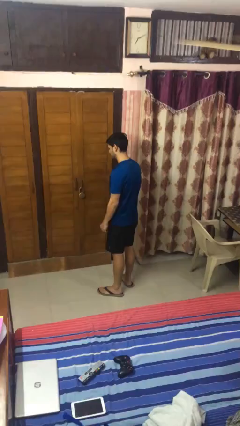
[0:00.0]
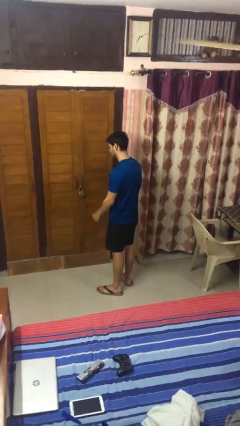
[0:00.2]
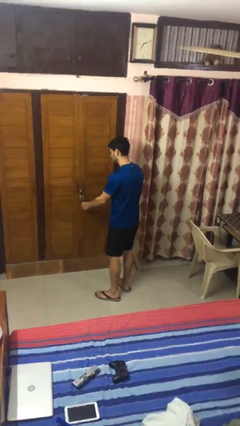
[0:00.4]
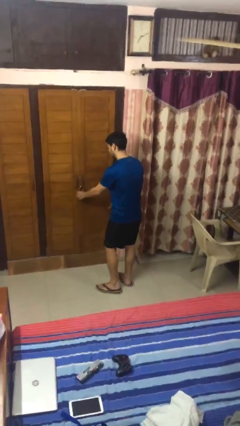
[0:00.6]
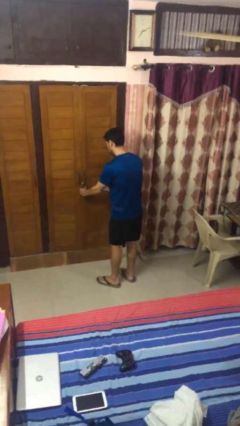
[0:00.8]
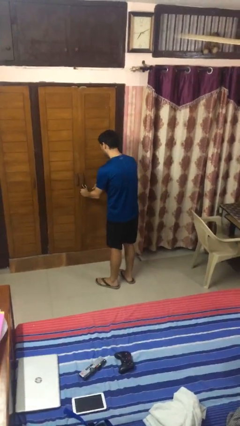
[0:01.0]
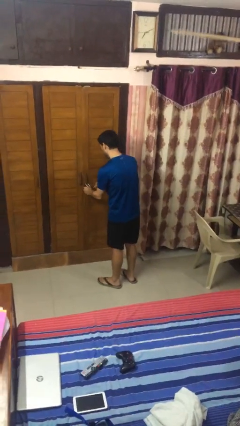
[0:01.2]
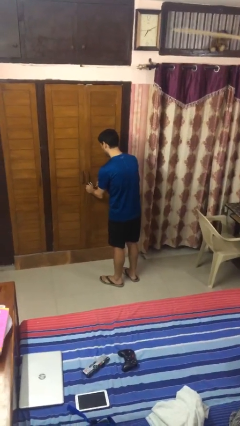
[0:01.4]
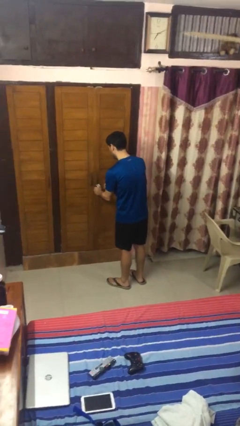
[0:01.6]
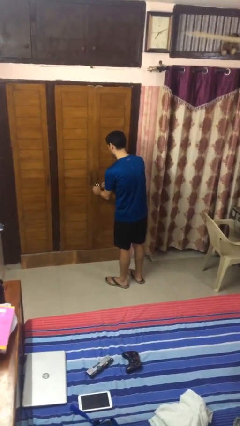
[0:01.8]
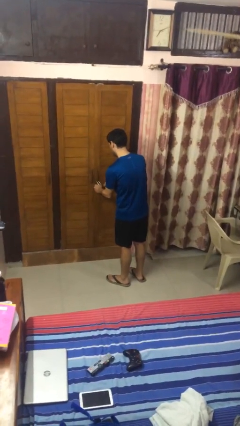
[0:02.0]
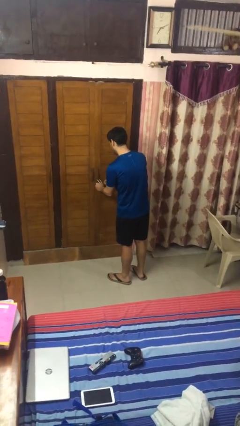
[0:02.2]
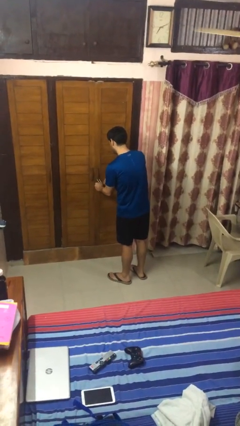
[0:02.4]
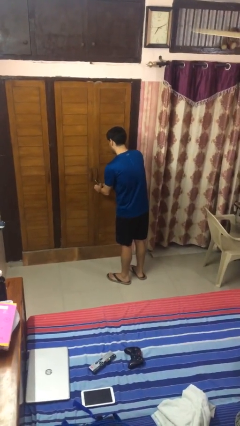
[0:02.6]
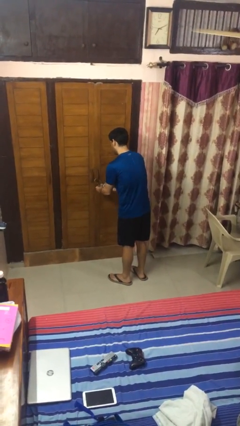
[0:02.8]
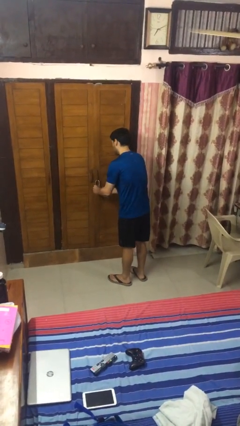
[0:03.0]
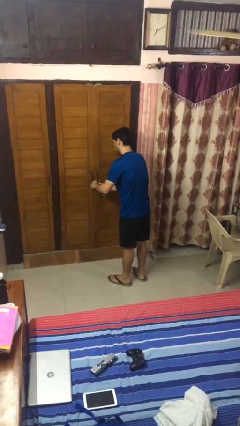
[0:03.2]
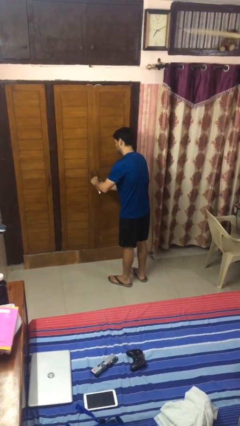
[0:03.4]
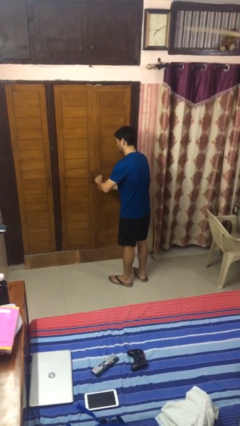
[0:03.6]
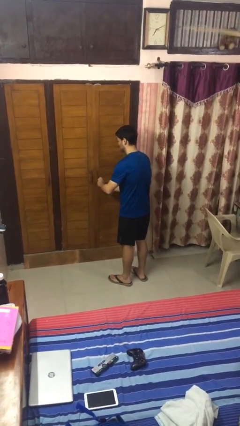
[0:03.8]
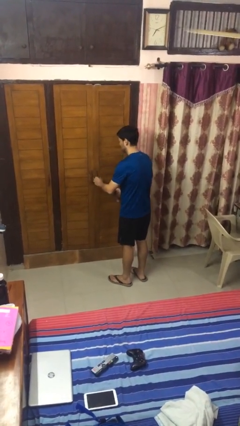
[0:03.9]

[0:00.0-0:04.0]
person unlocks door with keys

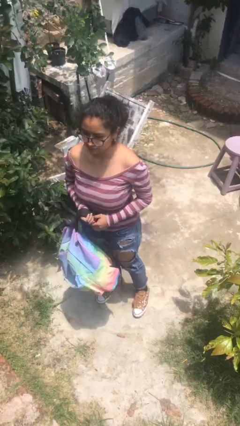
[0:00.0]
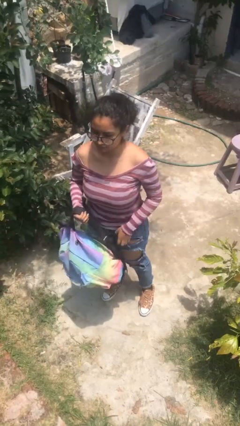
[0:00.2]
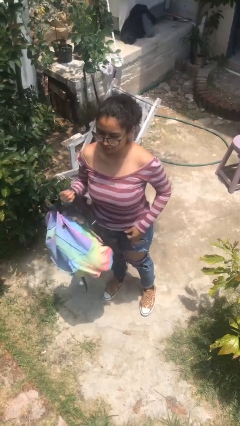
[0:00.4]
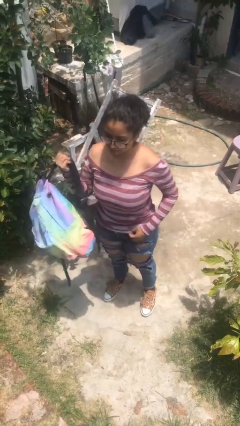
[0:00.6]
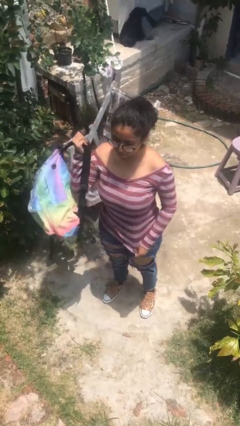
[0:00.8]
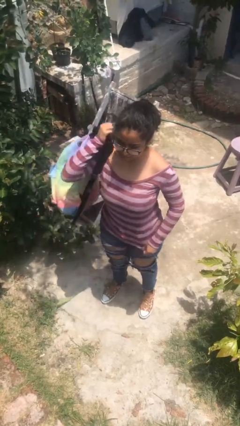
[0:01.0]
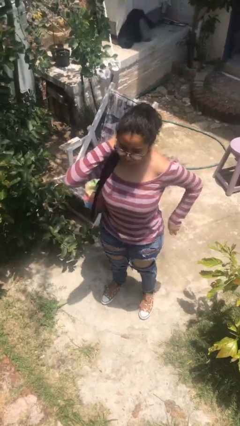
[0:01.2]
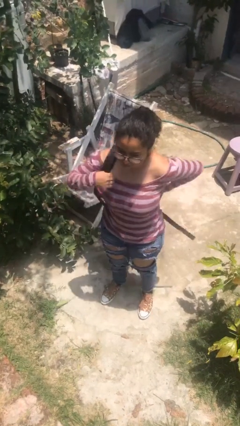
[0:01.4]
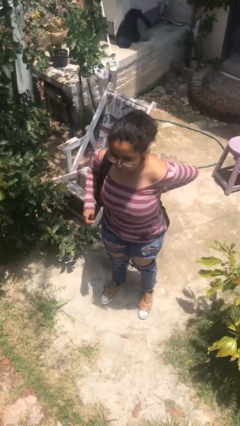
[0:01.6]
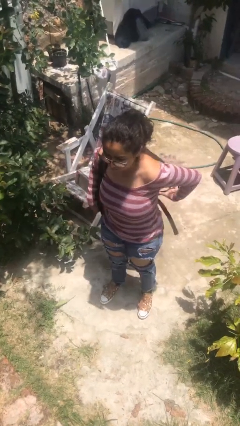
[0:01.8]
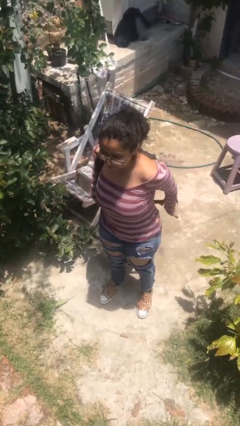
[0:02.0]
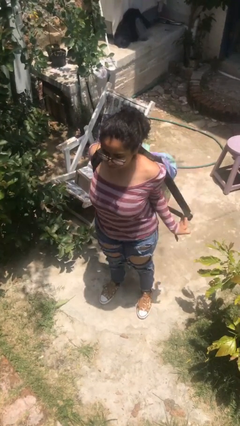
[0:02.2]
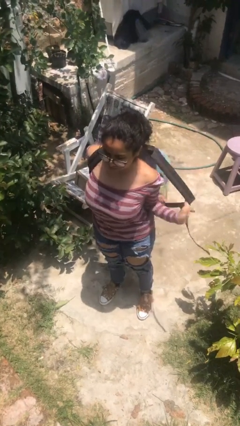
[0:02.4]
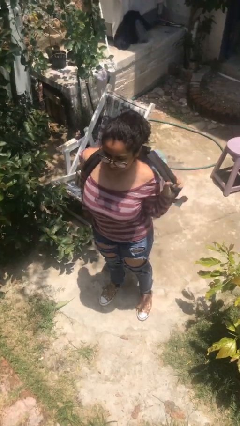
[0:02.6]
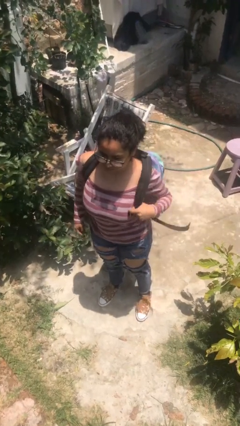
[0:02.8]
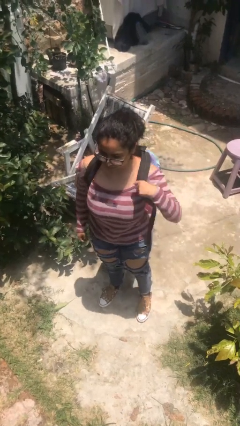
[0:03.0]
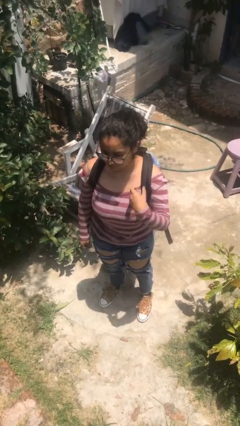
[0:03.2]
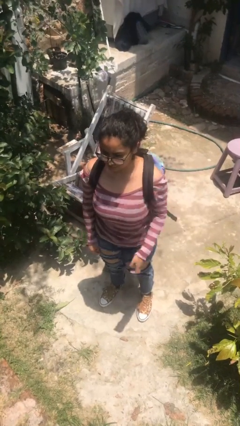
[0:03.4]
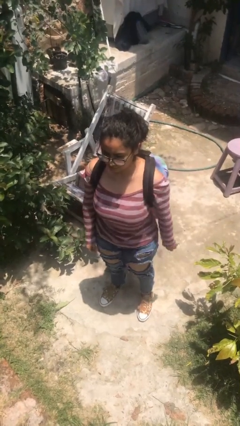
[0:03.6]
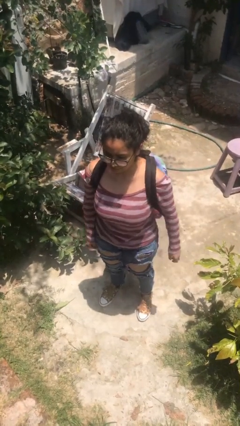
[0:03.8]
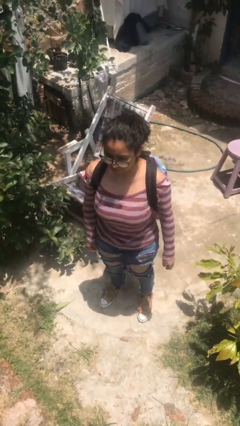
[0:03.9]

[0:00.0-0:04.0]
person puts on backpack

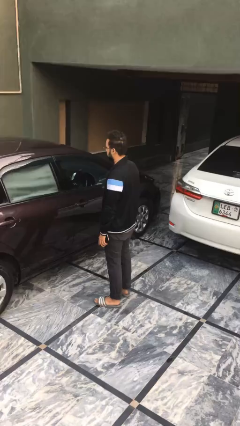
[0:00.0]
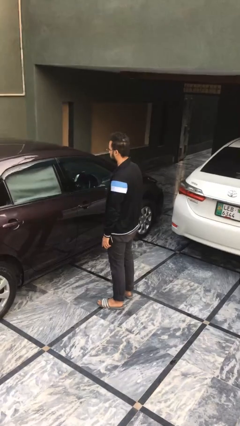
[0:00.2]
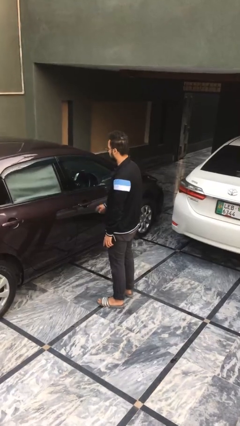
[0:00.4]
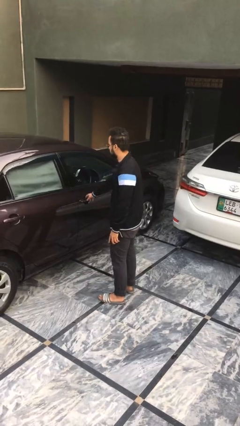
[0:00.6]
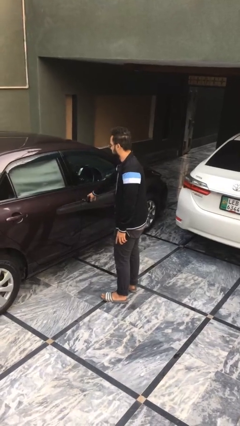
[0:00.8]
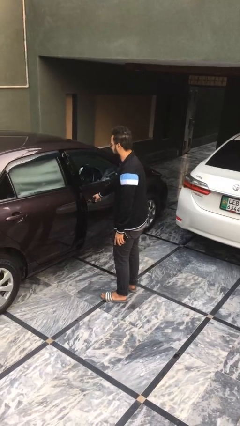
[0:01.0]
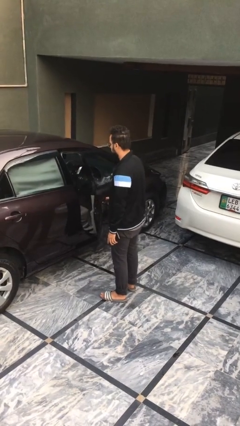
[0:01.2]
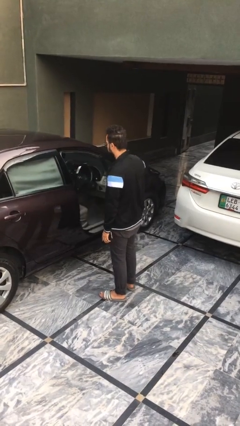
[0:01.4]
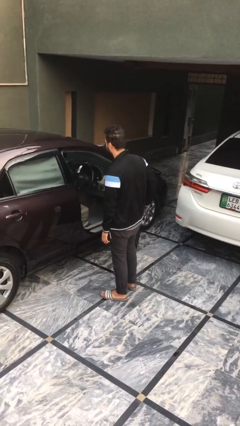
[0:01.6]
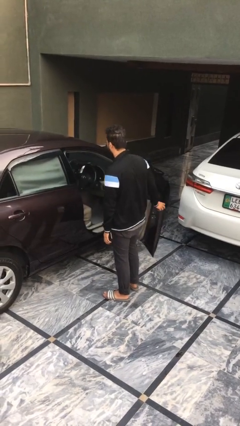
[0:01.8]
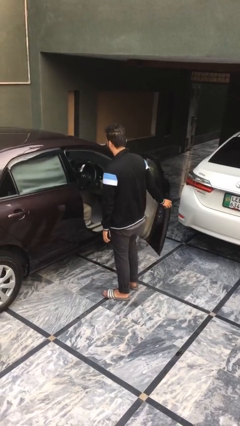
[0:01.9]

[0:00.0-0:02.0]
person opens car door

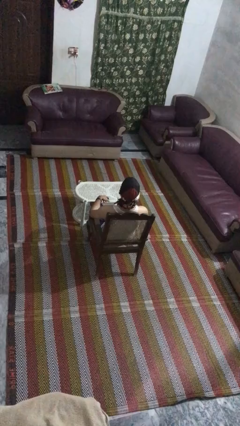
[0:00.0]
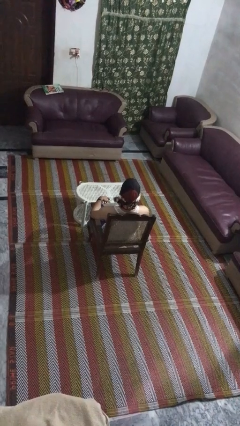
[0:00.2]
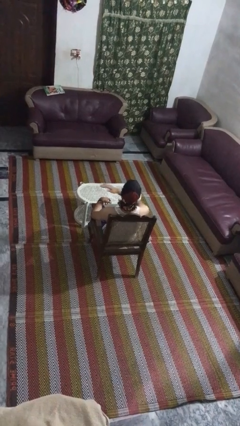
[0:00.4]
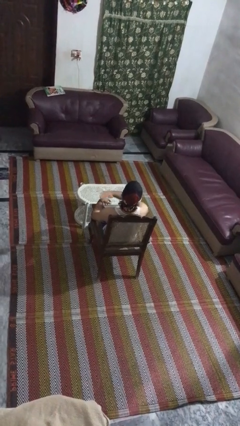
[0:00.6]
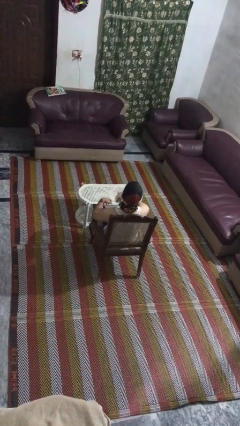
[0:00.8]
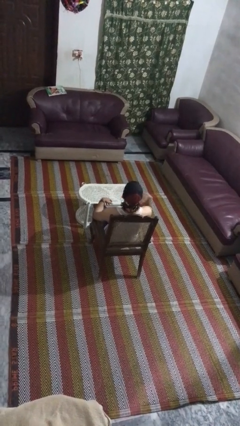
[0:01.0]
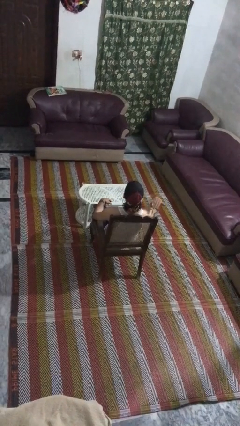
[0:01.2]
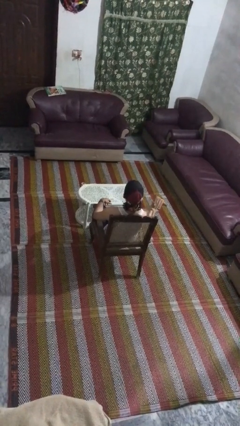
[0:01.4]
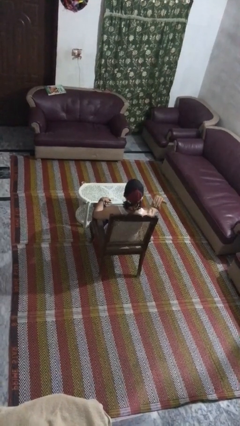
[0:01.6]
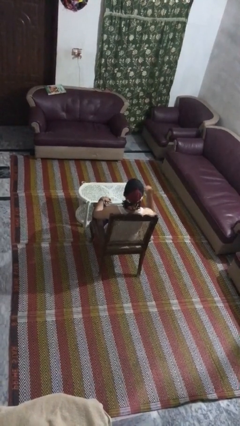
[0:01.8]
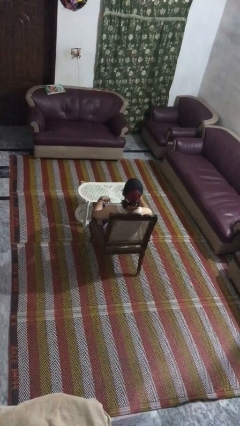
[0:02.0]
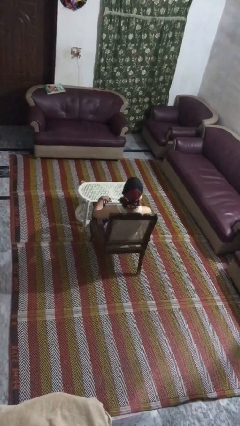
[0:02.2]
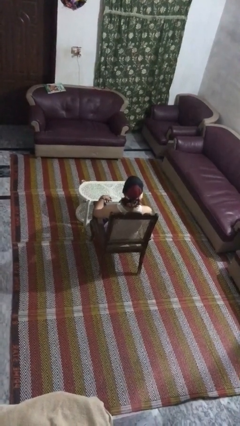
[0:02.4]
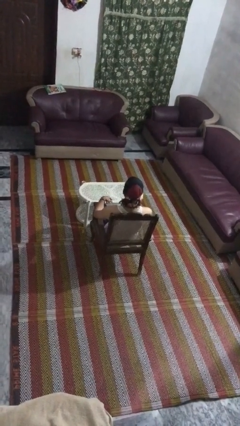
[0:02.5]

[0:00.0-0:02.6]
person gestures cut

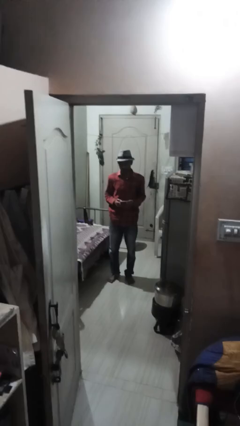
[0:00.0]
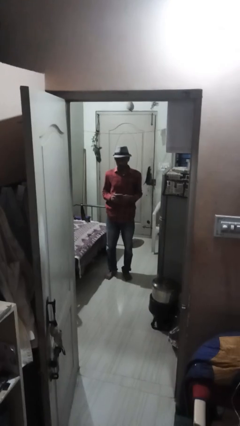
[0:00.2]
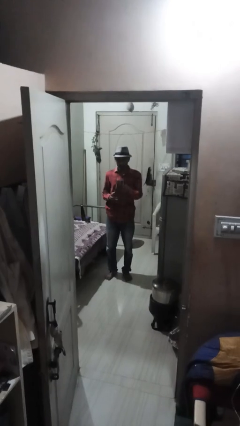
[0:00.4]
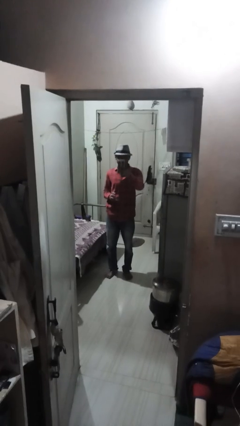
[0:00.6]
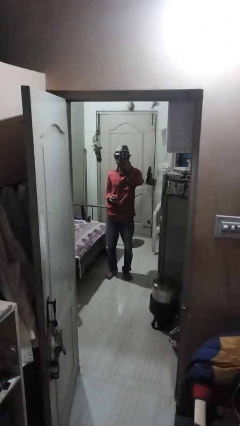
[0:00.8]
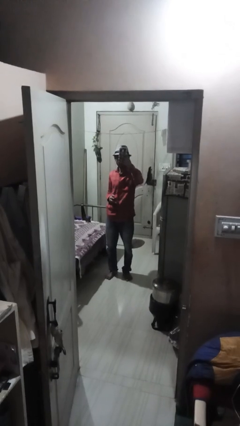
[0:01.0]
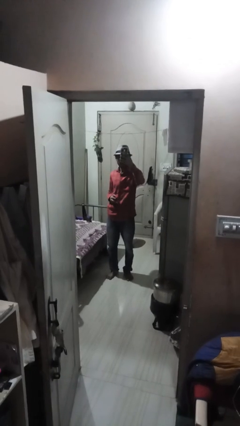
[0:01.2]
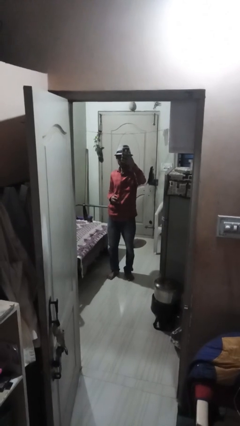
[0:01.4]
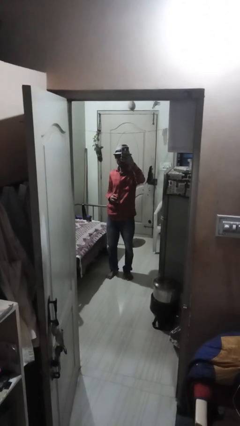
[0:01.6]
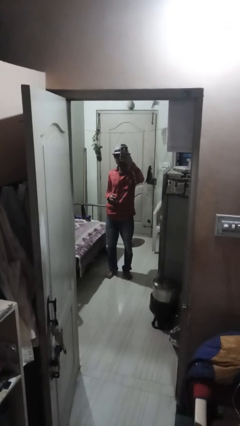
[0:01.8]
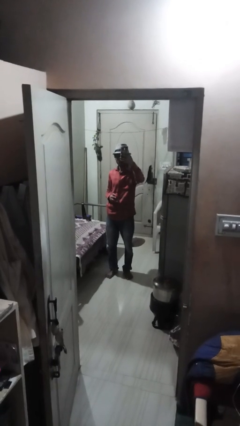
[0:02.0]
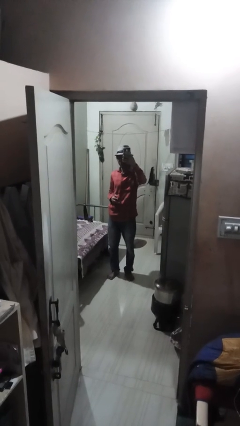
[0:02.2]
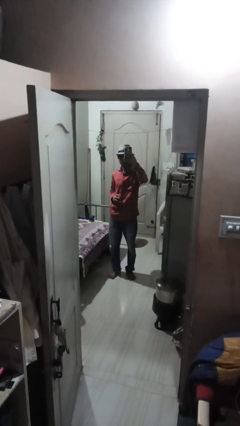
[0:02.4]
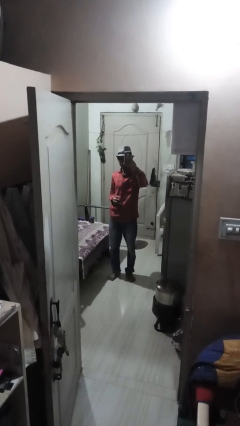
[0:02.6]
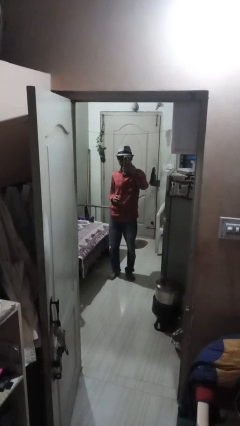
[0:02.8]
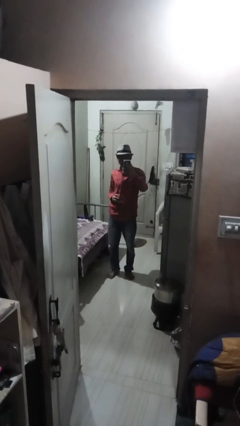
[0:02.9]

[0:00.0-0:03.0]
person takes selfie

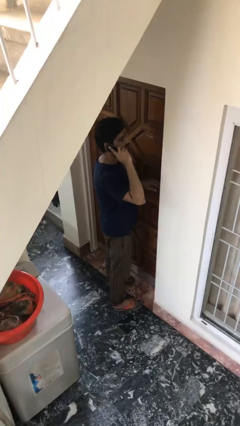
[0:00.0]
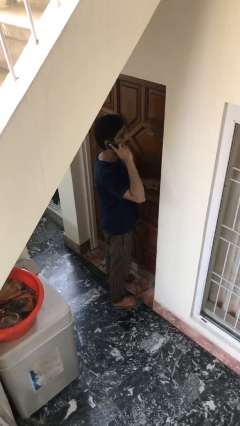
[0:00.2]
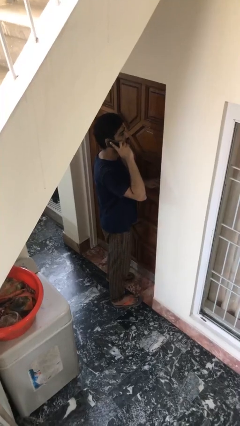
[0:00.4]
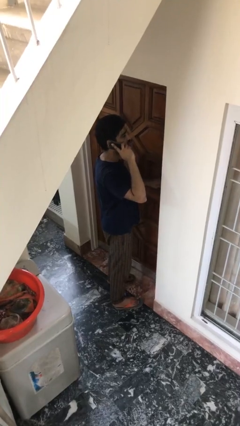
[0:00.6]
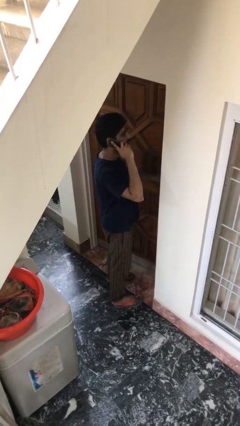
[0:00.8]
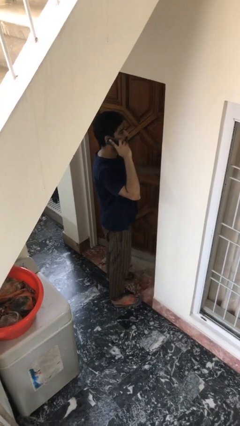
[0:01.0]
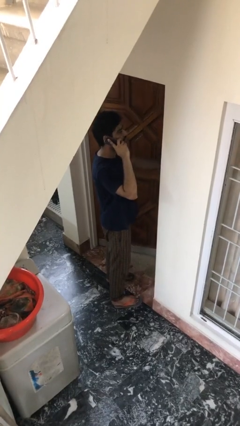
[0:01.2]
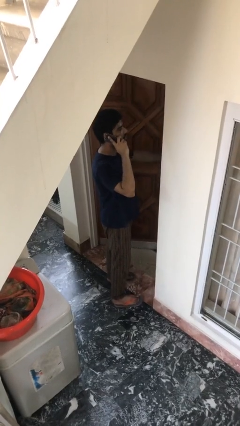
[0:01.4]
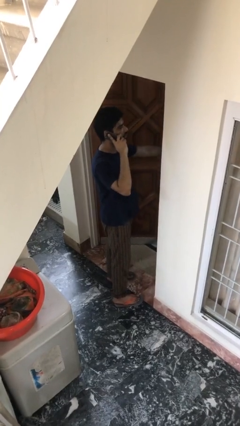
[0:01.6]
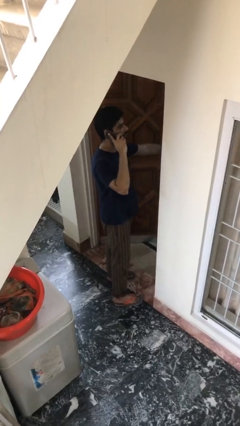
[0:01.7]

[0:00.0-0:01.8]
person opens facility door
